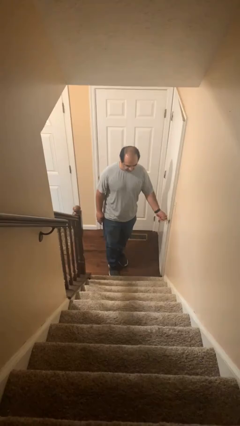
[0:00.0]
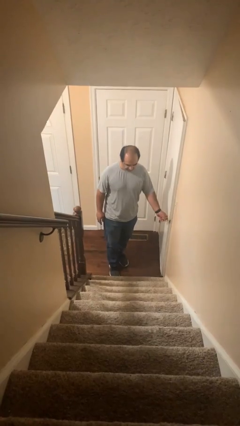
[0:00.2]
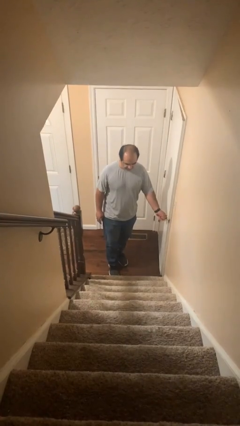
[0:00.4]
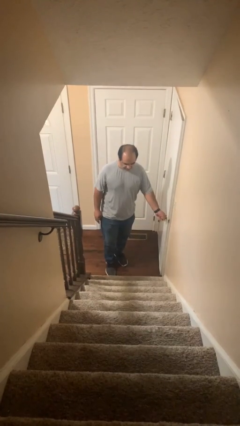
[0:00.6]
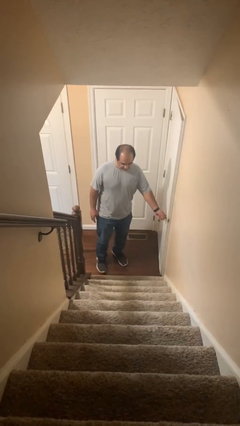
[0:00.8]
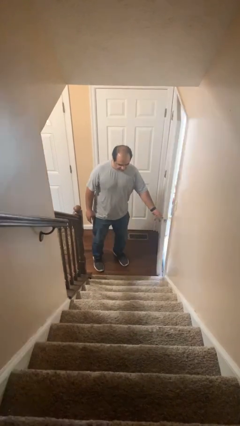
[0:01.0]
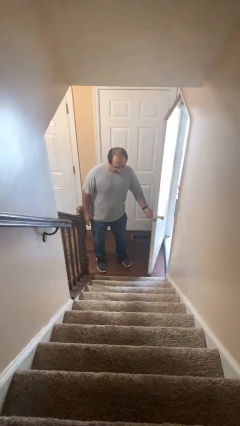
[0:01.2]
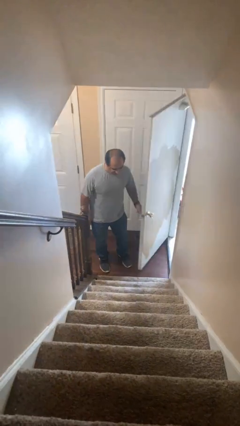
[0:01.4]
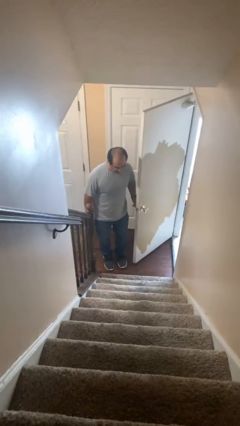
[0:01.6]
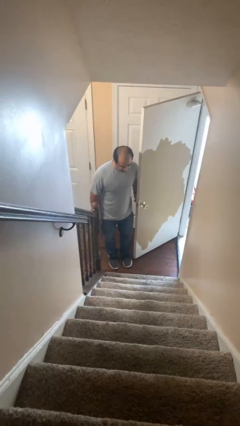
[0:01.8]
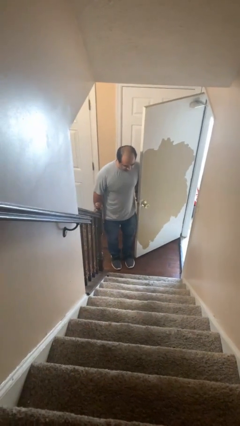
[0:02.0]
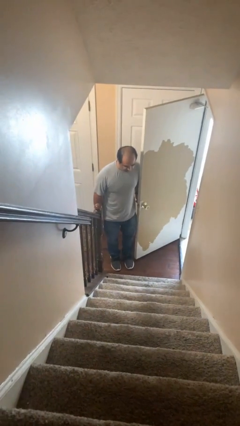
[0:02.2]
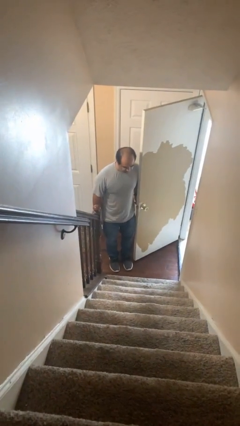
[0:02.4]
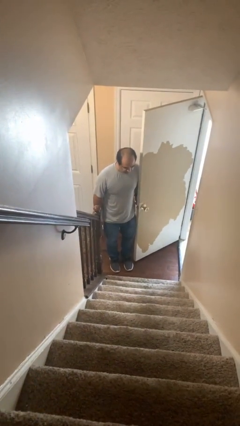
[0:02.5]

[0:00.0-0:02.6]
person opens facility door

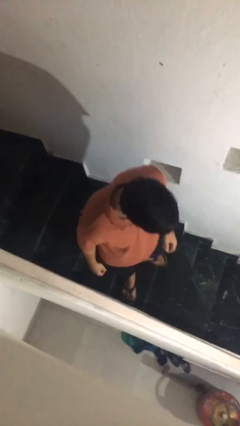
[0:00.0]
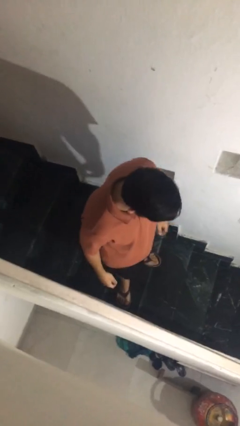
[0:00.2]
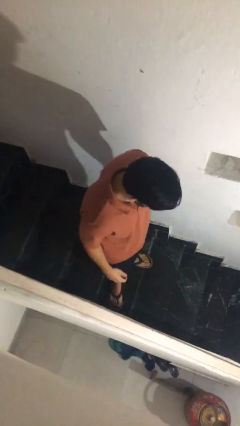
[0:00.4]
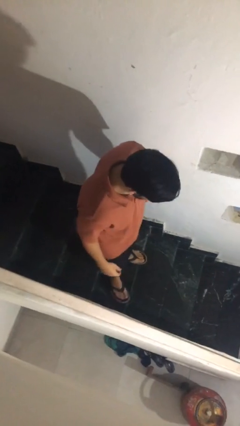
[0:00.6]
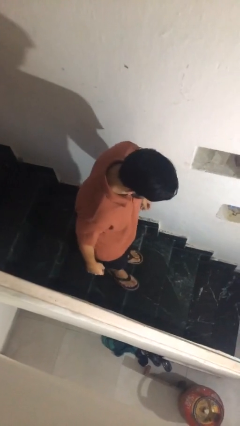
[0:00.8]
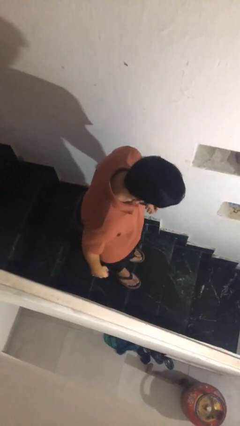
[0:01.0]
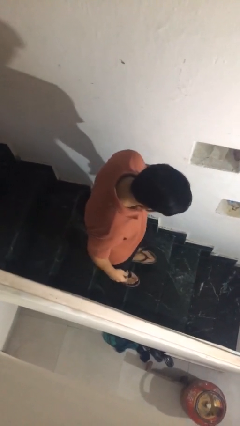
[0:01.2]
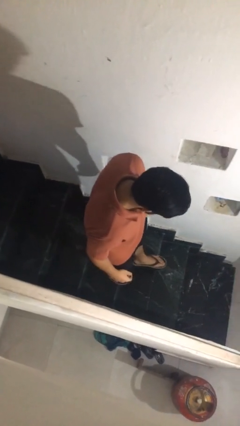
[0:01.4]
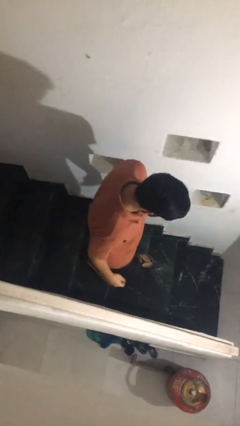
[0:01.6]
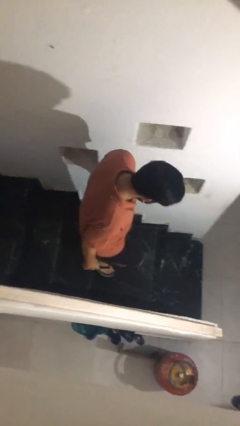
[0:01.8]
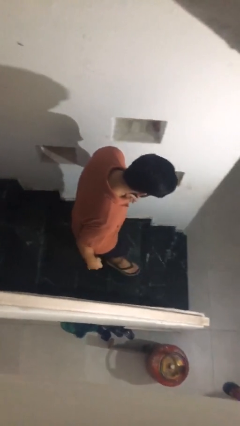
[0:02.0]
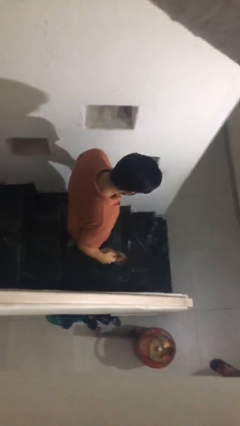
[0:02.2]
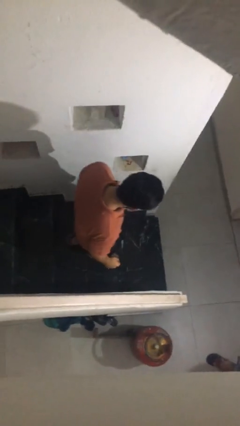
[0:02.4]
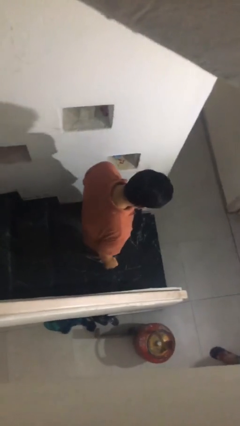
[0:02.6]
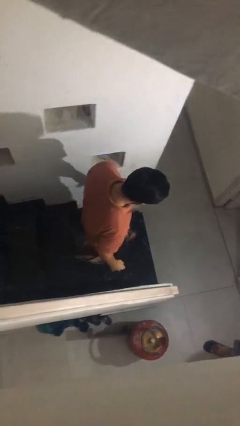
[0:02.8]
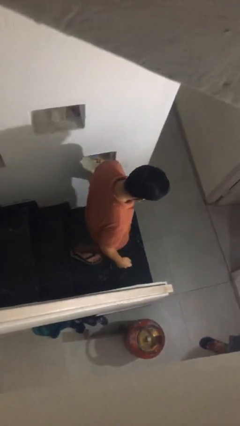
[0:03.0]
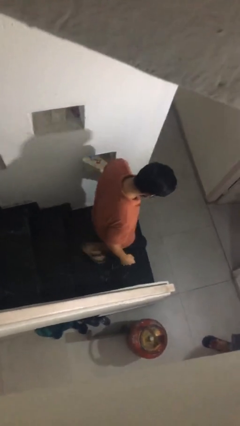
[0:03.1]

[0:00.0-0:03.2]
person climbs down stairs

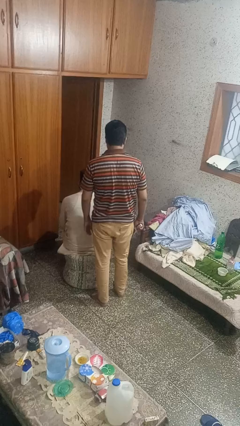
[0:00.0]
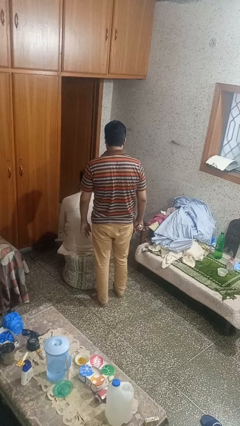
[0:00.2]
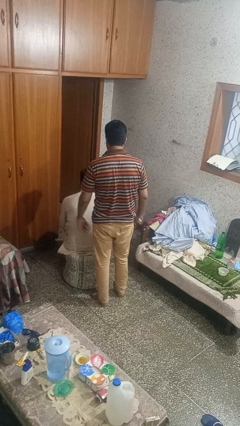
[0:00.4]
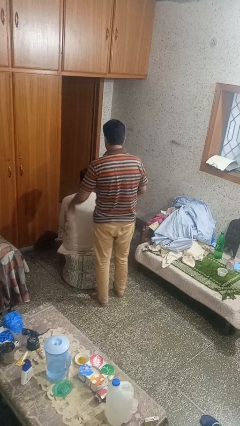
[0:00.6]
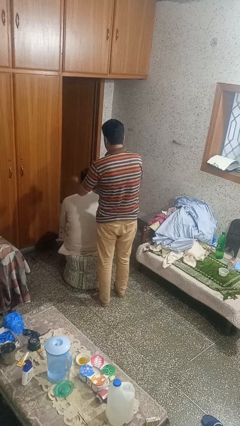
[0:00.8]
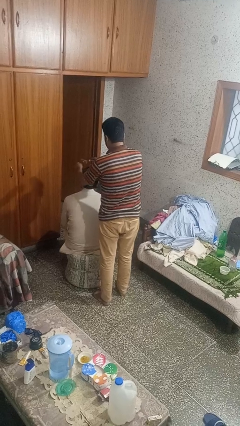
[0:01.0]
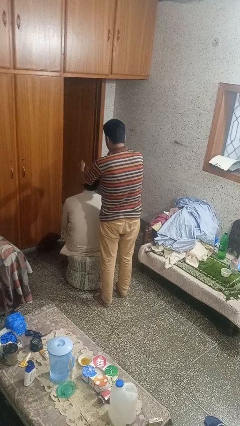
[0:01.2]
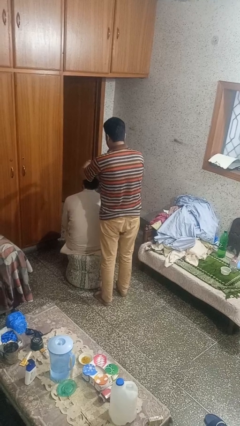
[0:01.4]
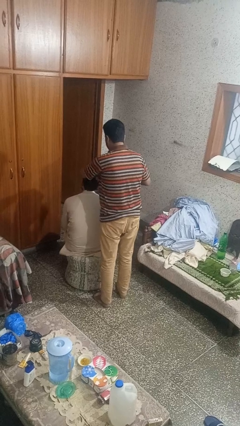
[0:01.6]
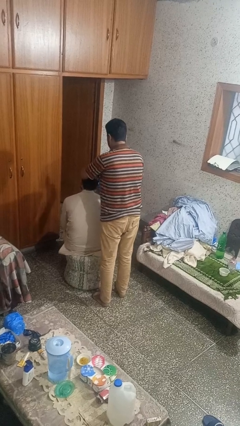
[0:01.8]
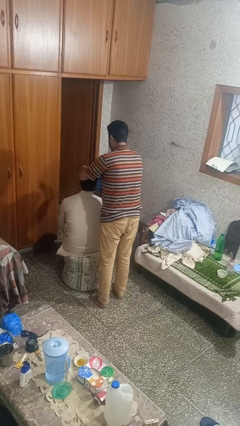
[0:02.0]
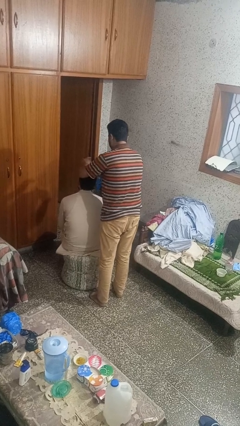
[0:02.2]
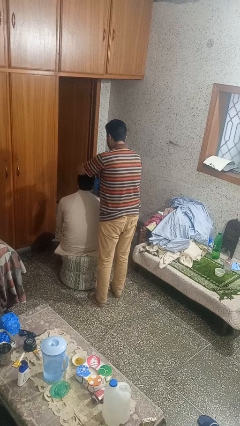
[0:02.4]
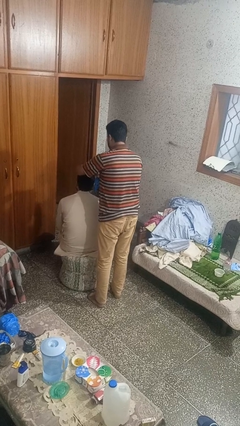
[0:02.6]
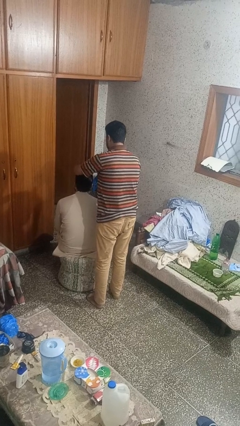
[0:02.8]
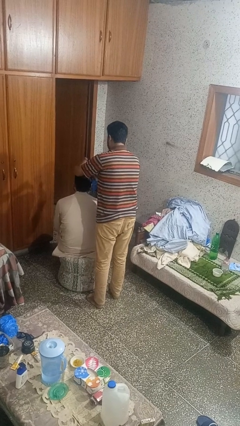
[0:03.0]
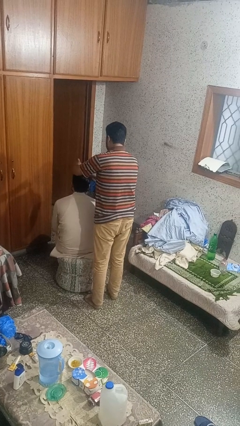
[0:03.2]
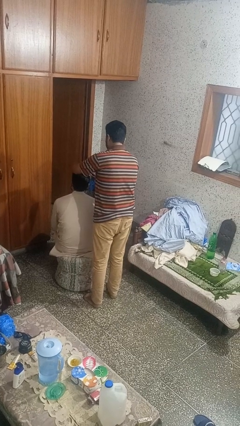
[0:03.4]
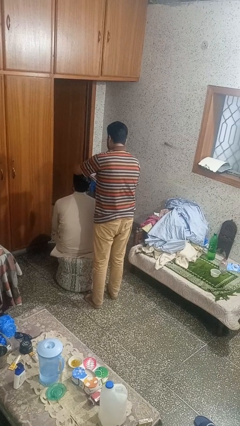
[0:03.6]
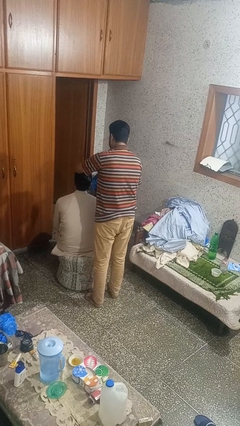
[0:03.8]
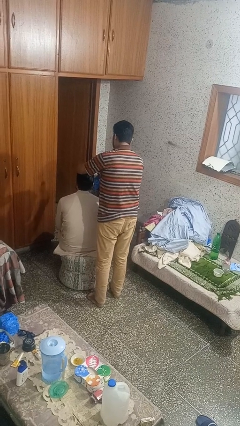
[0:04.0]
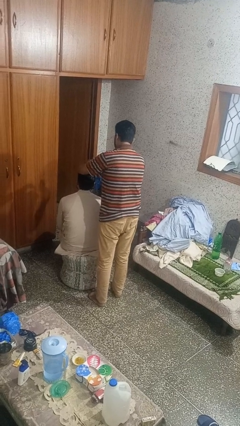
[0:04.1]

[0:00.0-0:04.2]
person brushes hair of person

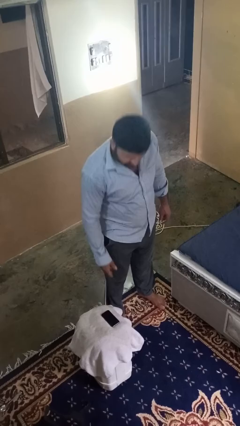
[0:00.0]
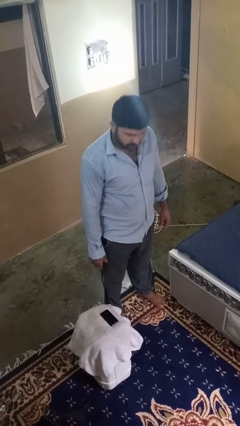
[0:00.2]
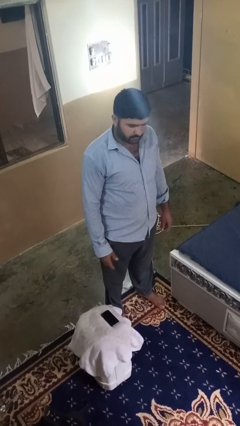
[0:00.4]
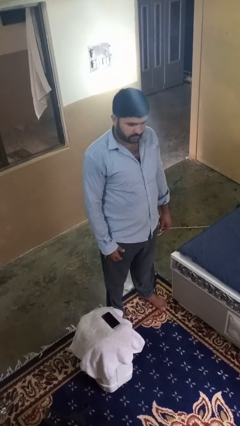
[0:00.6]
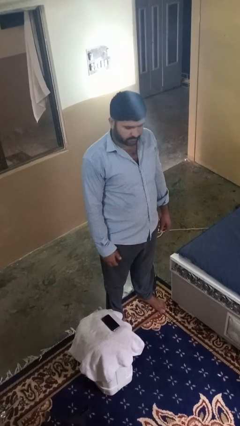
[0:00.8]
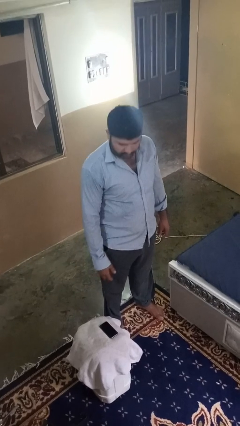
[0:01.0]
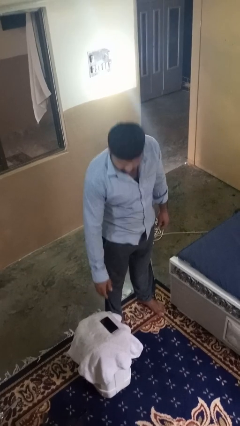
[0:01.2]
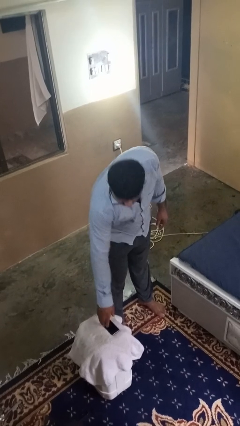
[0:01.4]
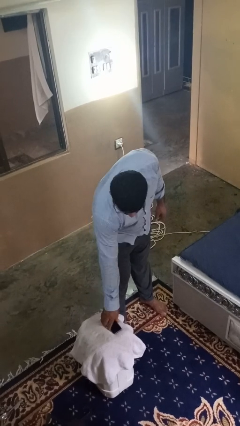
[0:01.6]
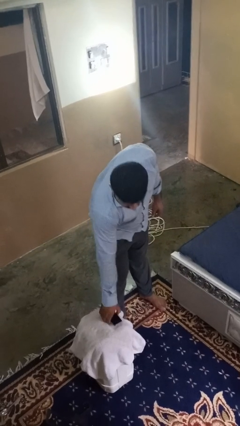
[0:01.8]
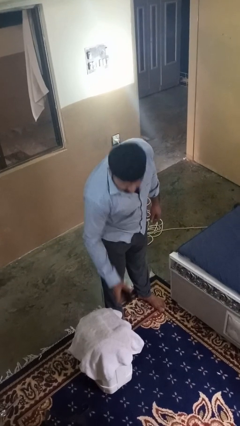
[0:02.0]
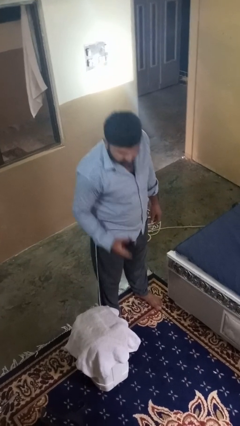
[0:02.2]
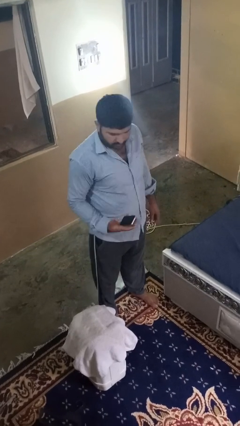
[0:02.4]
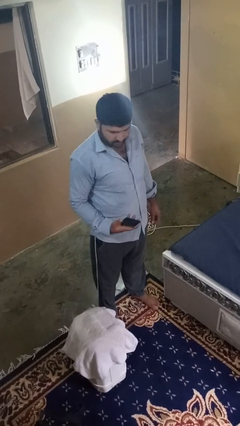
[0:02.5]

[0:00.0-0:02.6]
person takes phone from pocket

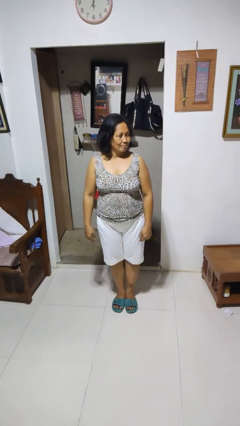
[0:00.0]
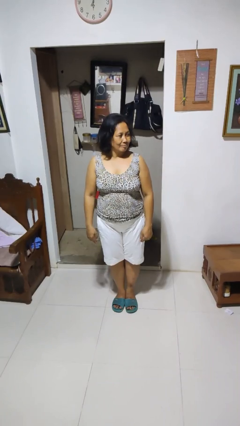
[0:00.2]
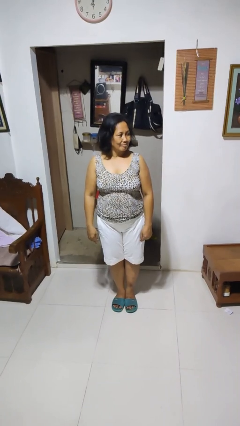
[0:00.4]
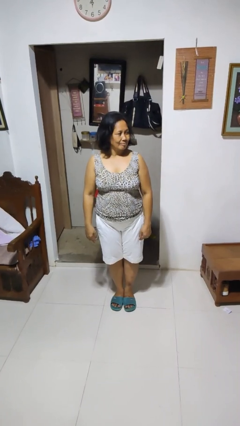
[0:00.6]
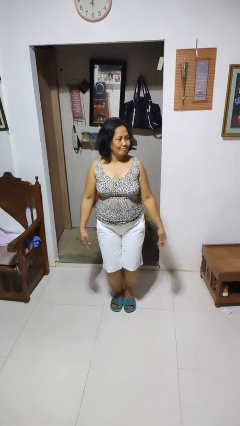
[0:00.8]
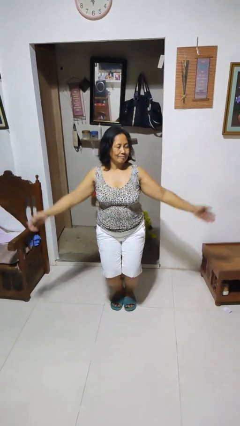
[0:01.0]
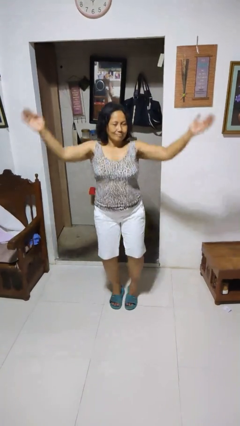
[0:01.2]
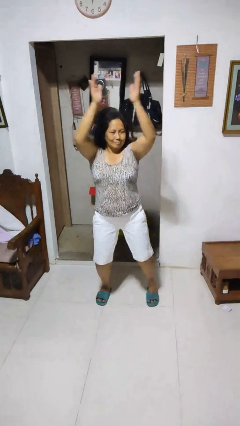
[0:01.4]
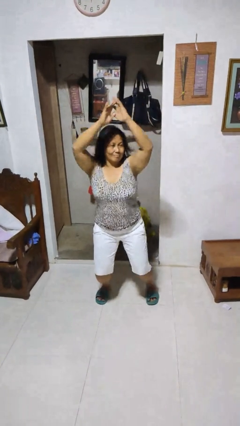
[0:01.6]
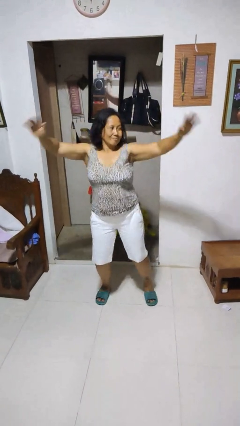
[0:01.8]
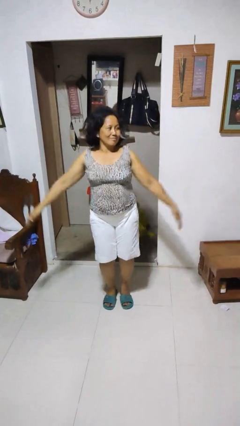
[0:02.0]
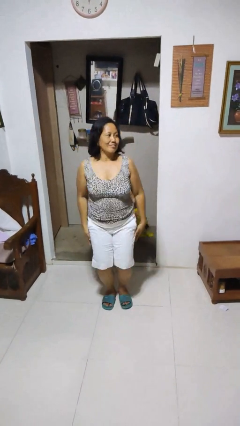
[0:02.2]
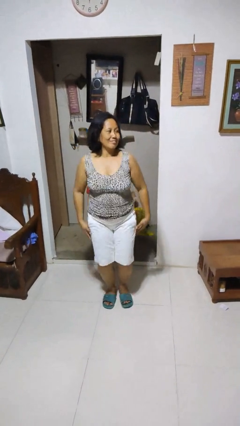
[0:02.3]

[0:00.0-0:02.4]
person exercises with jumping jacks

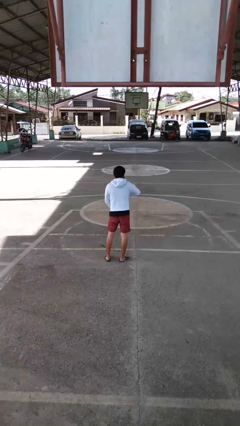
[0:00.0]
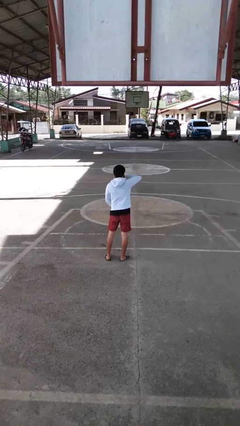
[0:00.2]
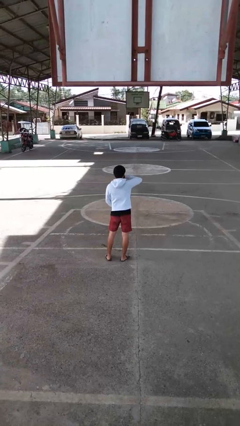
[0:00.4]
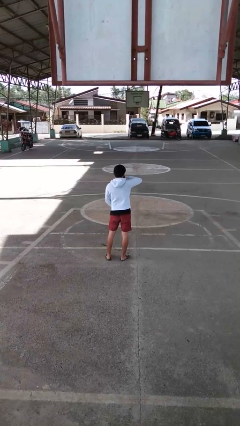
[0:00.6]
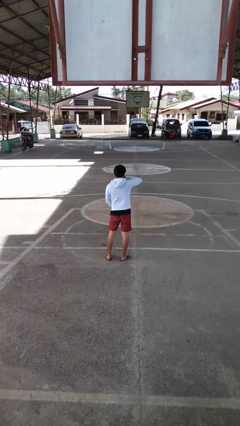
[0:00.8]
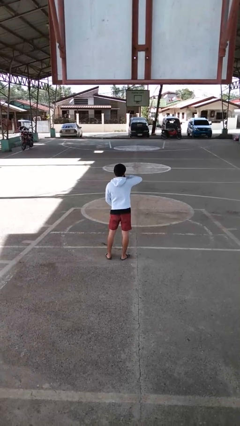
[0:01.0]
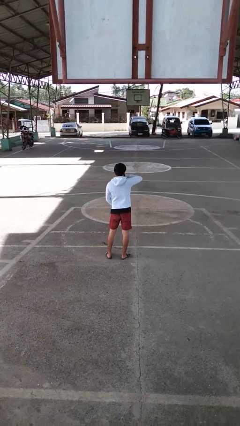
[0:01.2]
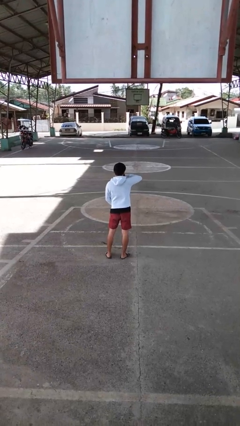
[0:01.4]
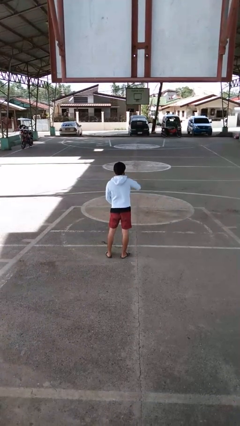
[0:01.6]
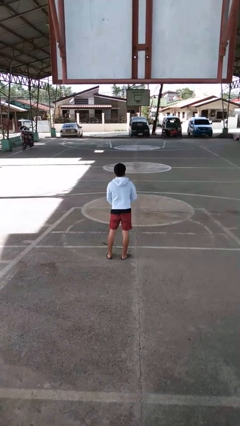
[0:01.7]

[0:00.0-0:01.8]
person zips up jacket

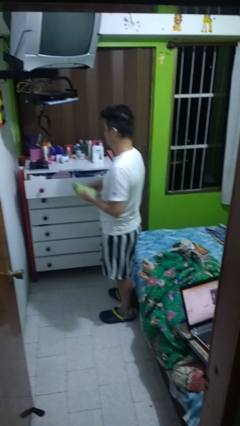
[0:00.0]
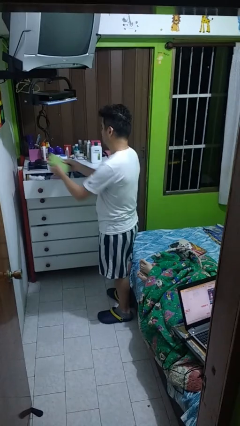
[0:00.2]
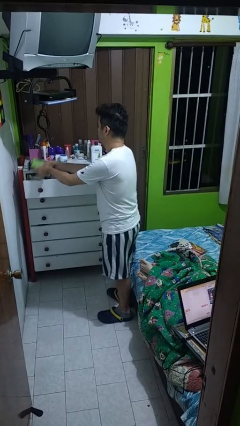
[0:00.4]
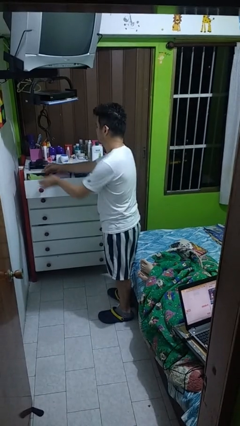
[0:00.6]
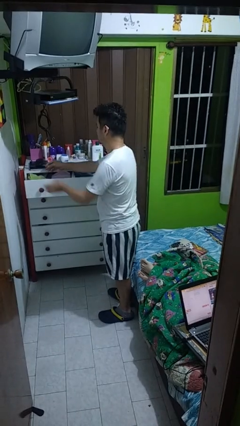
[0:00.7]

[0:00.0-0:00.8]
person puts clothes into dresser
